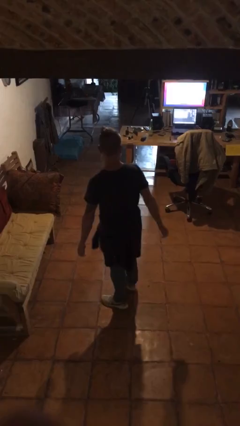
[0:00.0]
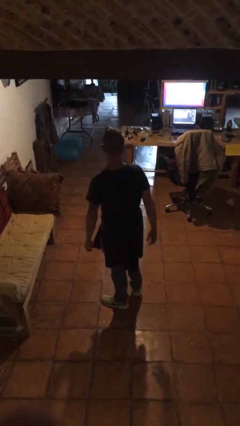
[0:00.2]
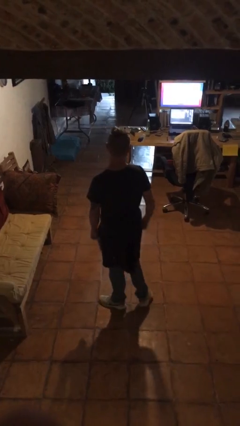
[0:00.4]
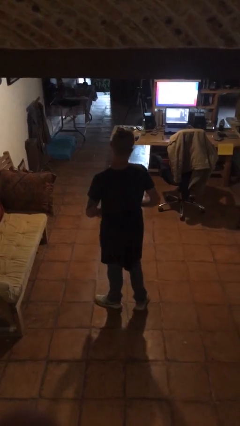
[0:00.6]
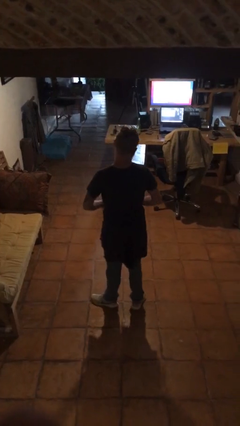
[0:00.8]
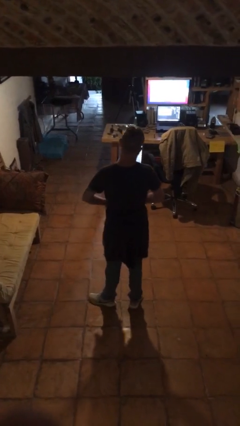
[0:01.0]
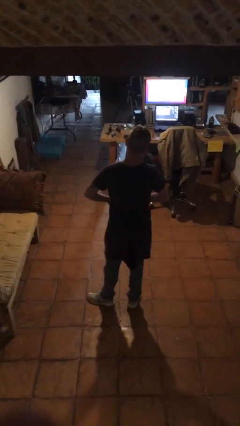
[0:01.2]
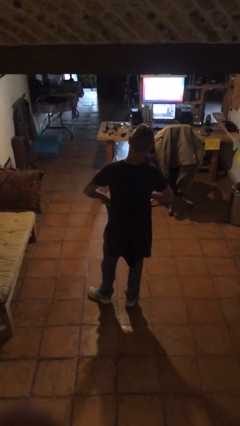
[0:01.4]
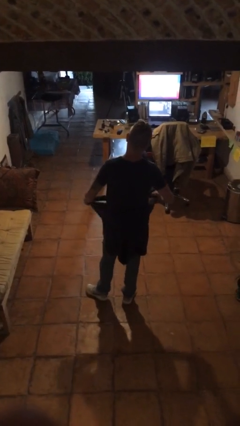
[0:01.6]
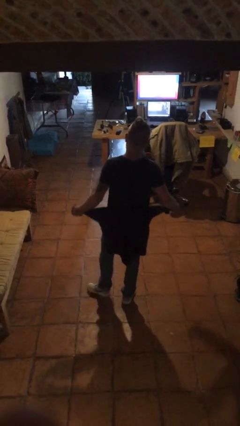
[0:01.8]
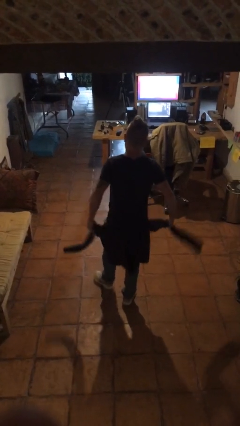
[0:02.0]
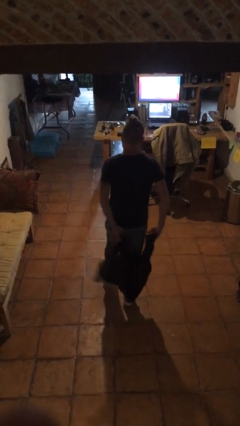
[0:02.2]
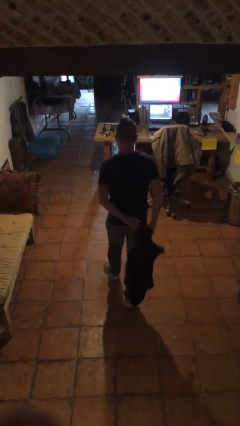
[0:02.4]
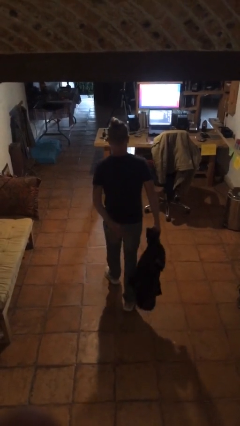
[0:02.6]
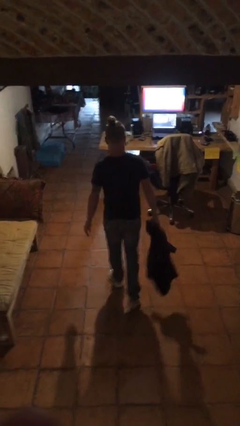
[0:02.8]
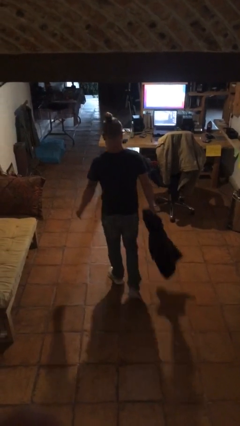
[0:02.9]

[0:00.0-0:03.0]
person unties jacket around waist

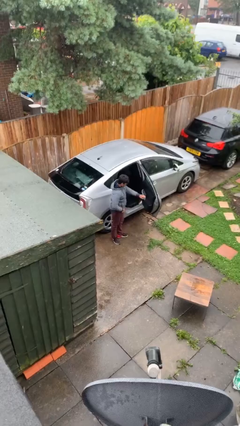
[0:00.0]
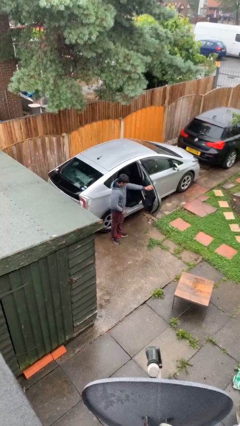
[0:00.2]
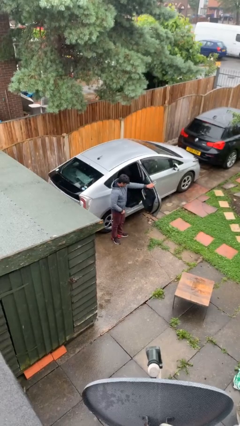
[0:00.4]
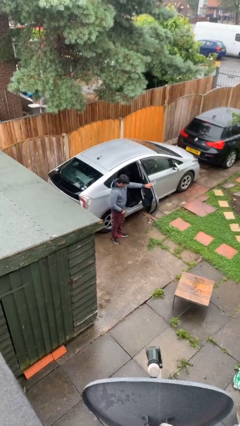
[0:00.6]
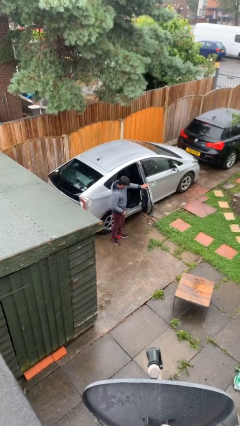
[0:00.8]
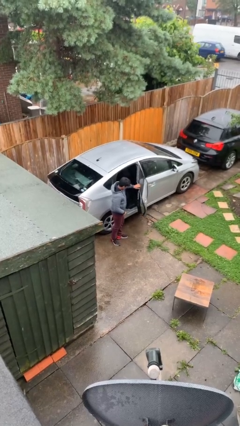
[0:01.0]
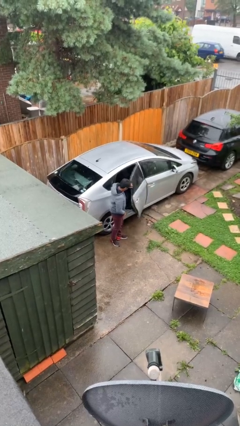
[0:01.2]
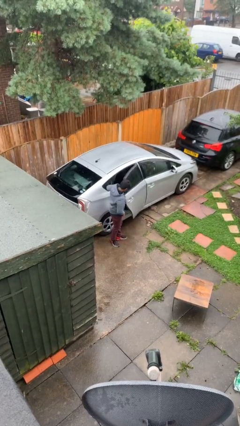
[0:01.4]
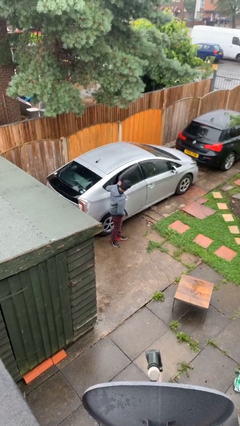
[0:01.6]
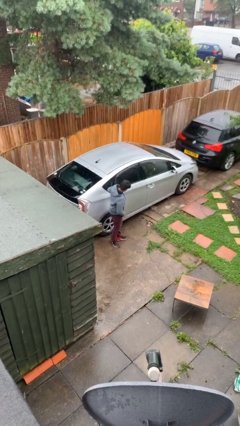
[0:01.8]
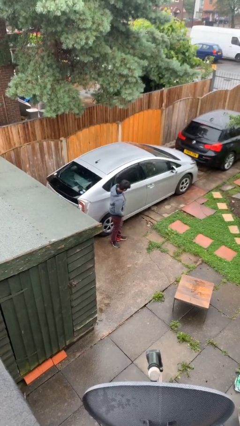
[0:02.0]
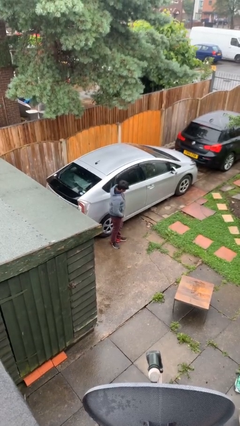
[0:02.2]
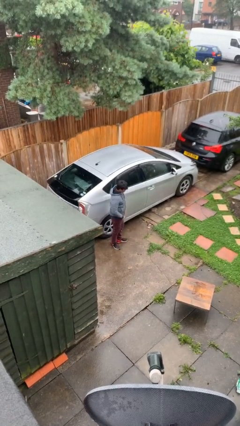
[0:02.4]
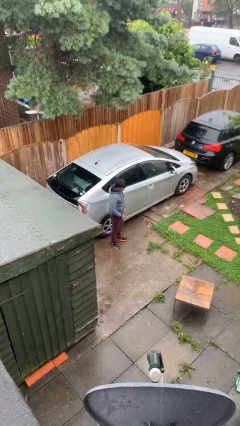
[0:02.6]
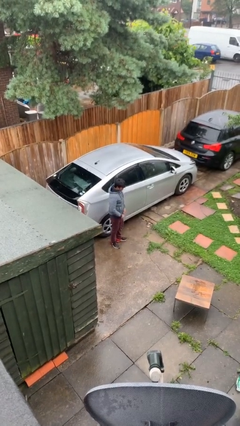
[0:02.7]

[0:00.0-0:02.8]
person closes car door

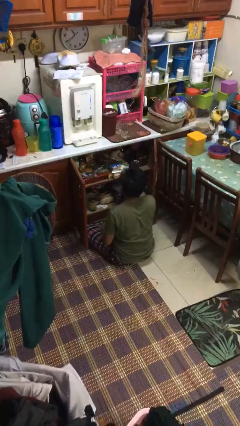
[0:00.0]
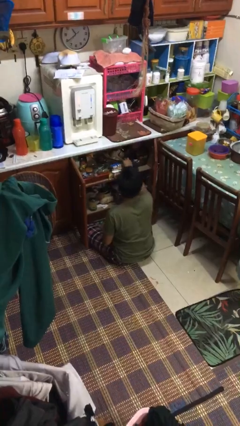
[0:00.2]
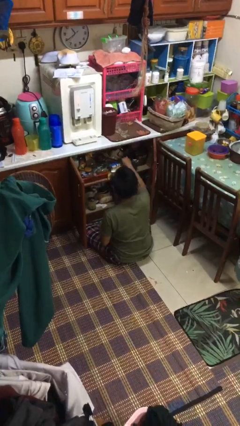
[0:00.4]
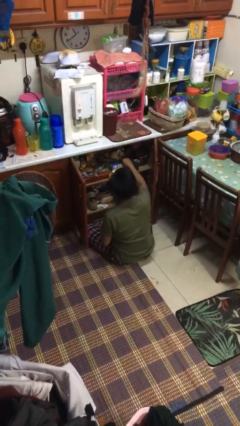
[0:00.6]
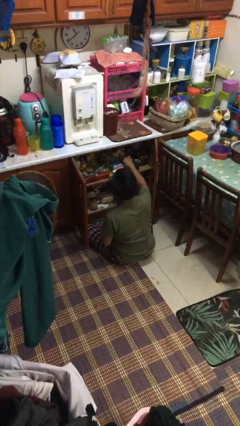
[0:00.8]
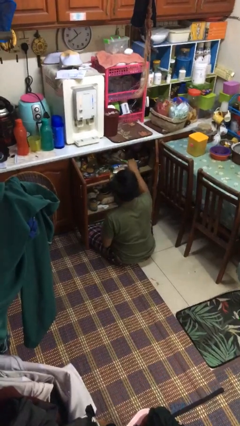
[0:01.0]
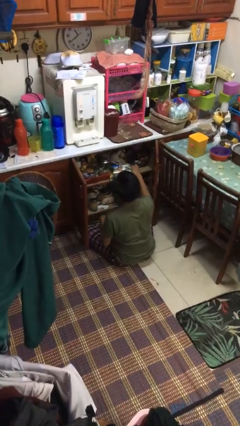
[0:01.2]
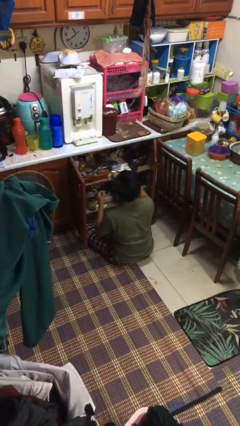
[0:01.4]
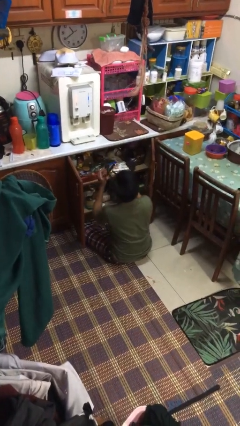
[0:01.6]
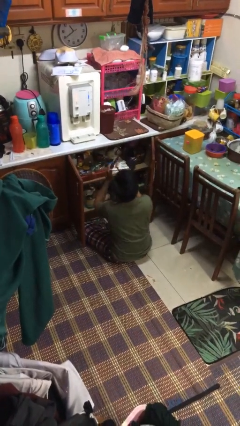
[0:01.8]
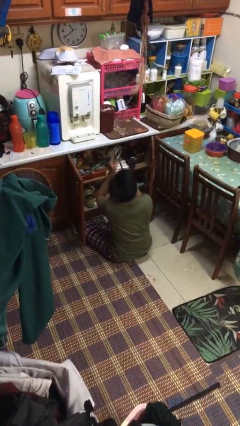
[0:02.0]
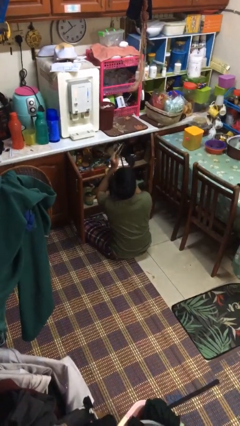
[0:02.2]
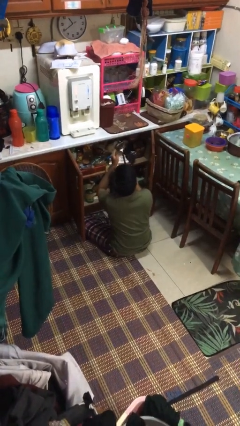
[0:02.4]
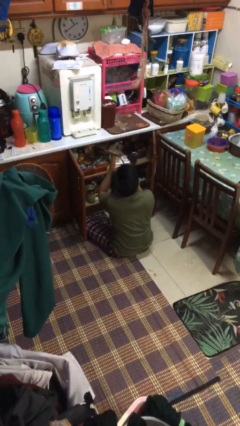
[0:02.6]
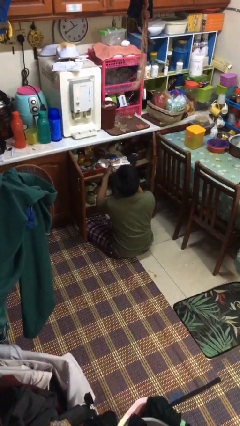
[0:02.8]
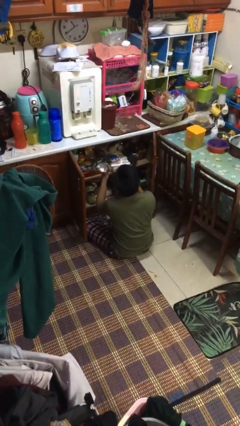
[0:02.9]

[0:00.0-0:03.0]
person takes object from kitchen drawer

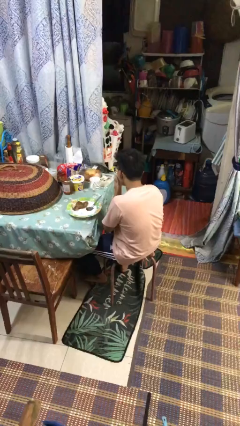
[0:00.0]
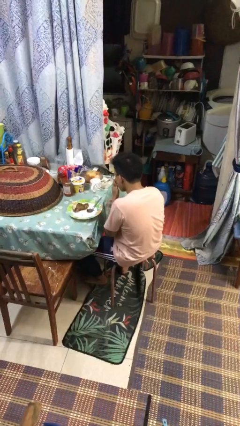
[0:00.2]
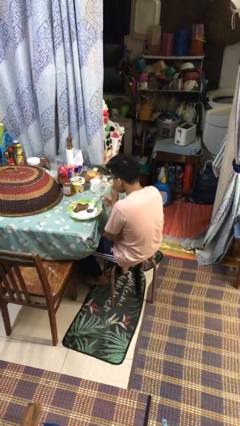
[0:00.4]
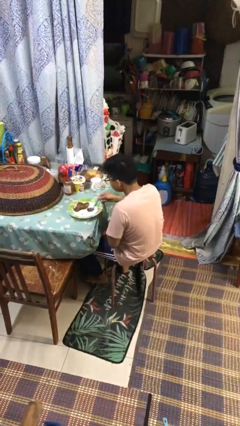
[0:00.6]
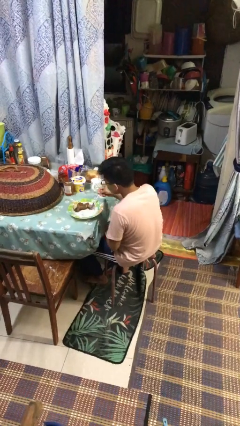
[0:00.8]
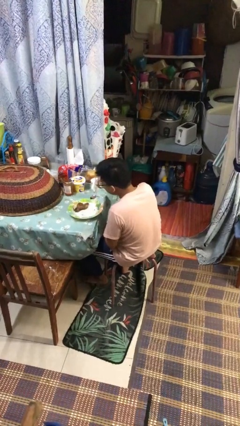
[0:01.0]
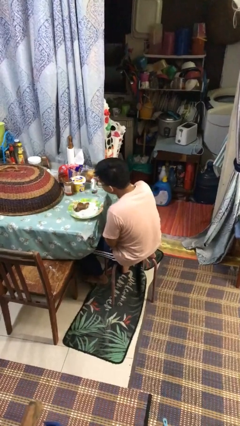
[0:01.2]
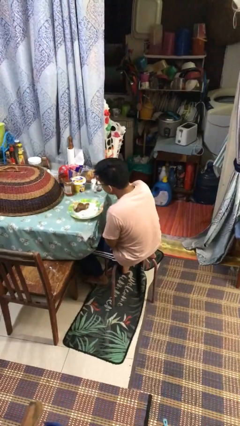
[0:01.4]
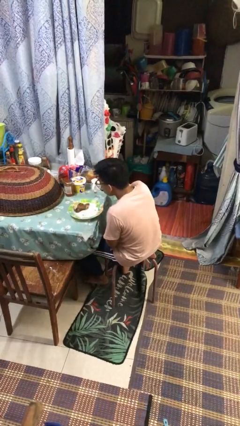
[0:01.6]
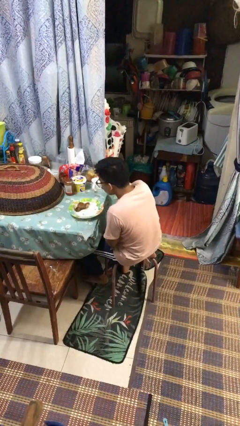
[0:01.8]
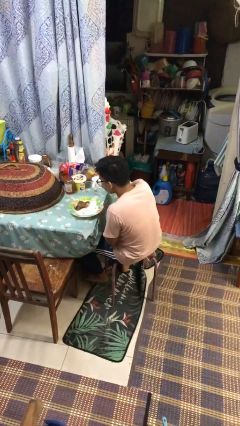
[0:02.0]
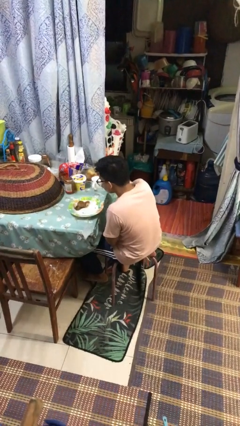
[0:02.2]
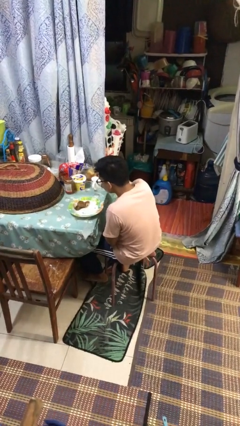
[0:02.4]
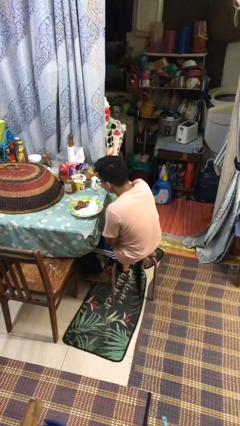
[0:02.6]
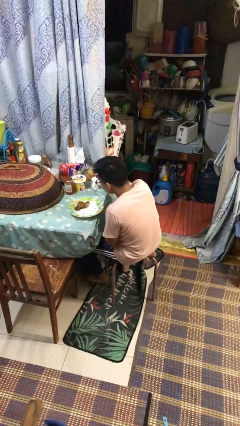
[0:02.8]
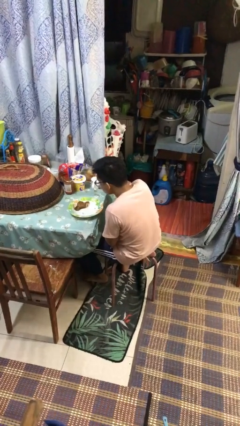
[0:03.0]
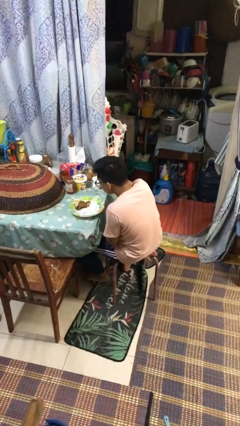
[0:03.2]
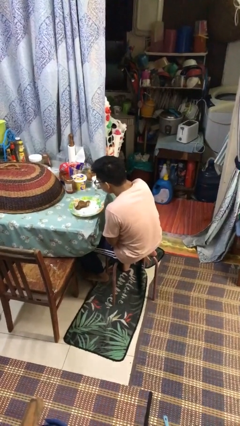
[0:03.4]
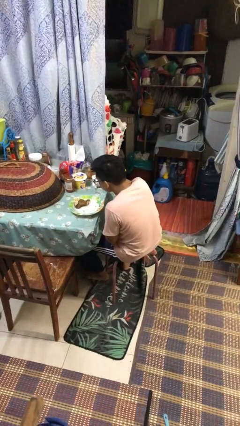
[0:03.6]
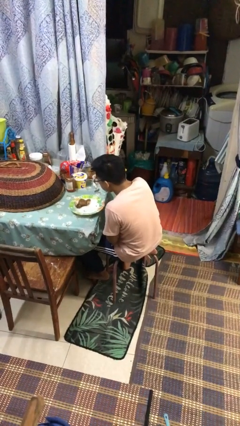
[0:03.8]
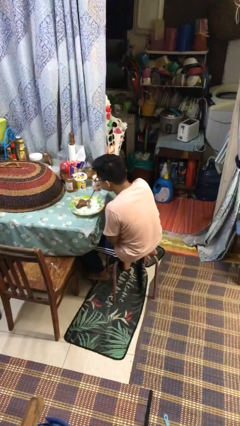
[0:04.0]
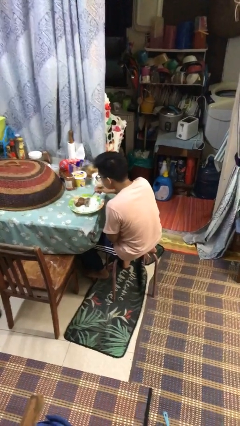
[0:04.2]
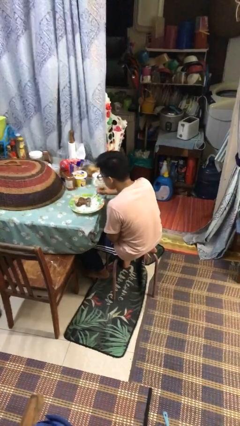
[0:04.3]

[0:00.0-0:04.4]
person eats with utensil

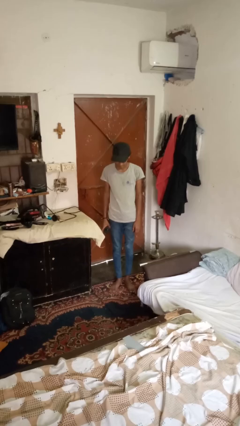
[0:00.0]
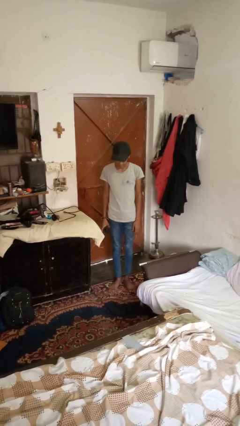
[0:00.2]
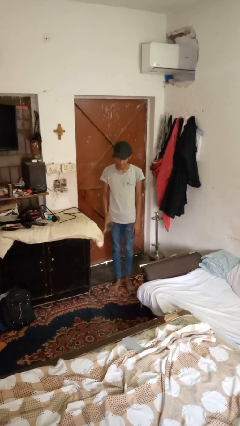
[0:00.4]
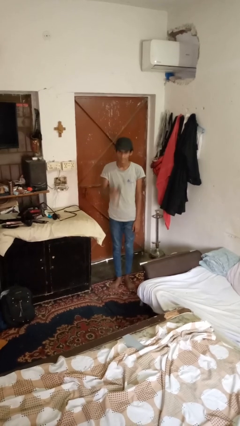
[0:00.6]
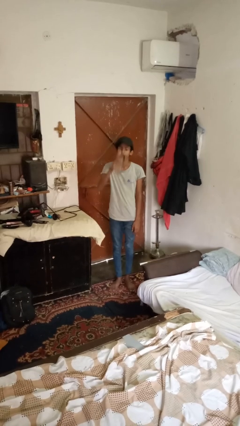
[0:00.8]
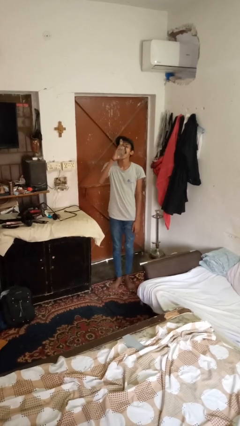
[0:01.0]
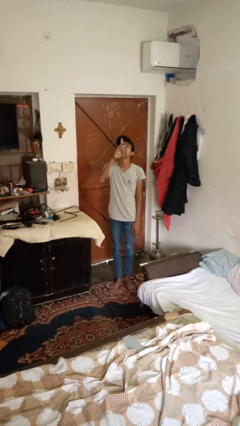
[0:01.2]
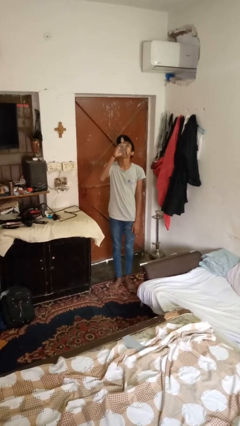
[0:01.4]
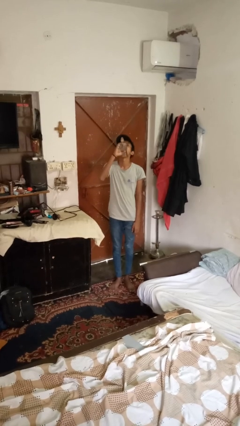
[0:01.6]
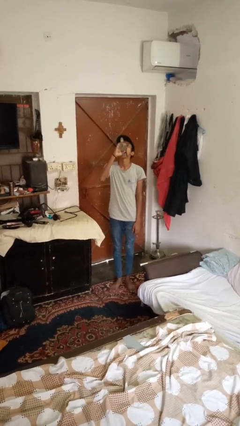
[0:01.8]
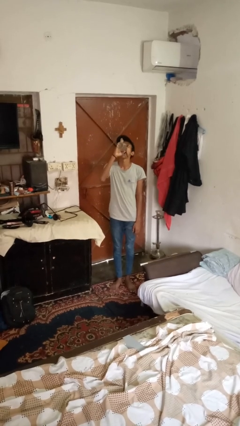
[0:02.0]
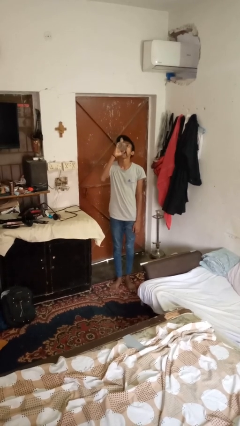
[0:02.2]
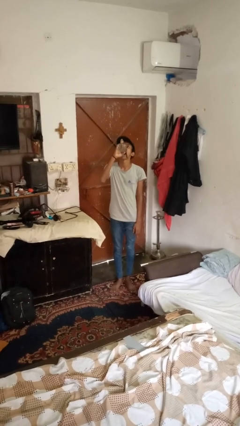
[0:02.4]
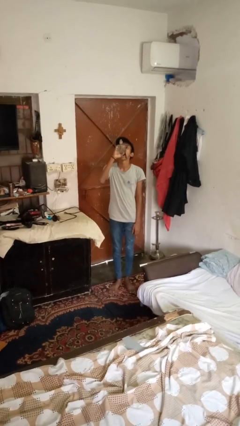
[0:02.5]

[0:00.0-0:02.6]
person drinks from bottle

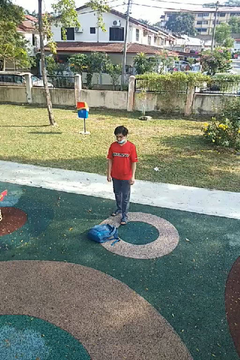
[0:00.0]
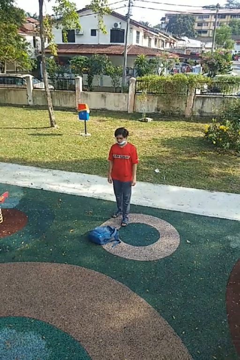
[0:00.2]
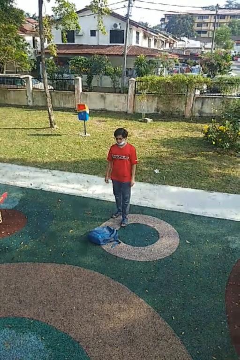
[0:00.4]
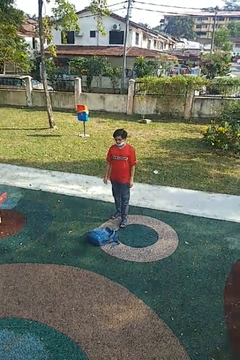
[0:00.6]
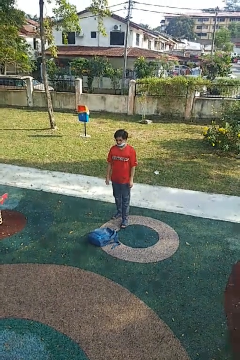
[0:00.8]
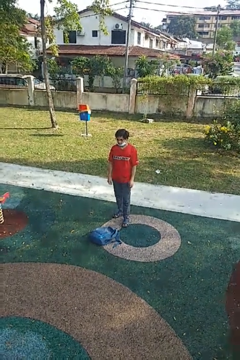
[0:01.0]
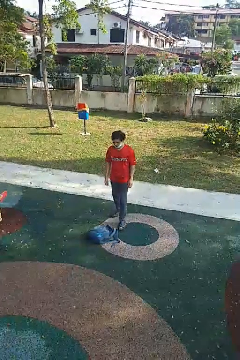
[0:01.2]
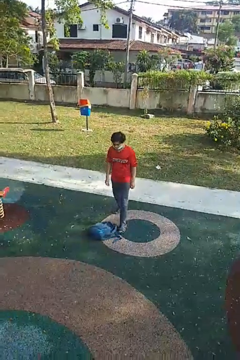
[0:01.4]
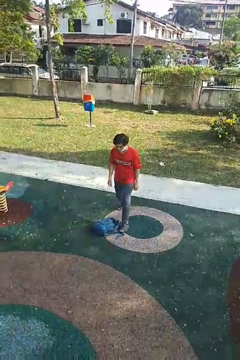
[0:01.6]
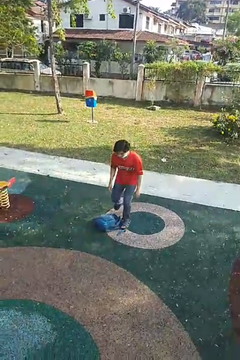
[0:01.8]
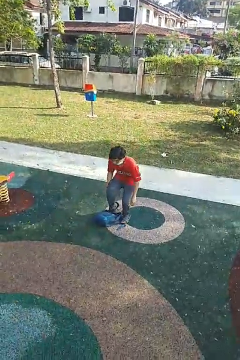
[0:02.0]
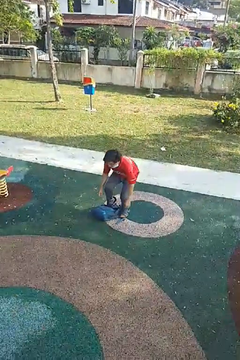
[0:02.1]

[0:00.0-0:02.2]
person trips on object on floor
